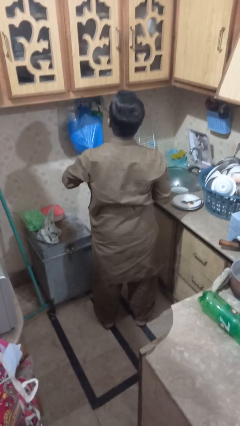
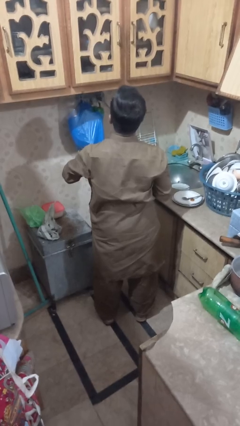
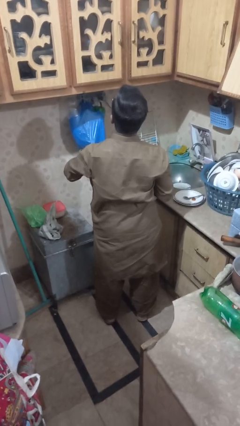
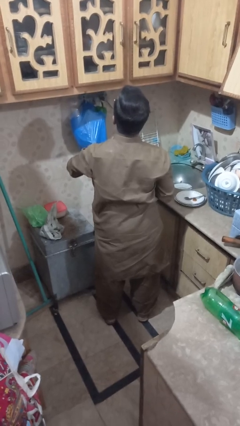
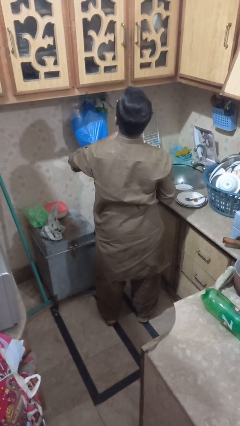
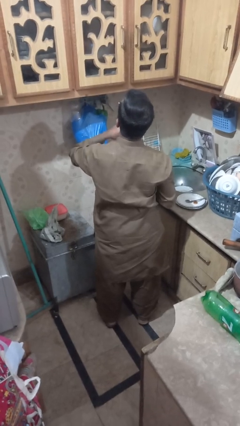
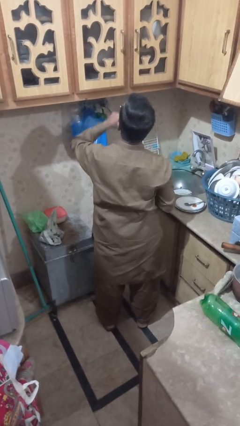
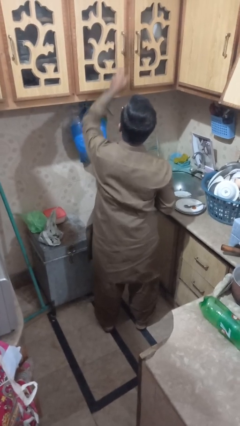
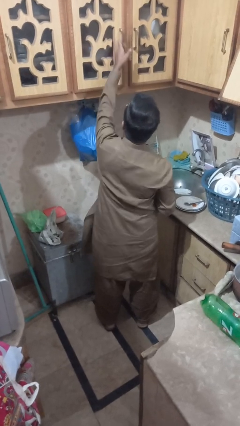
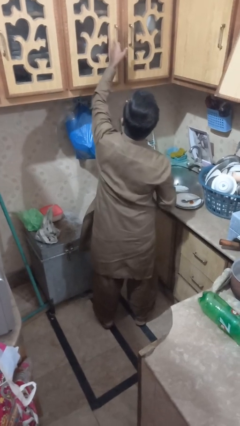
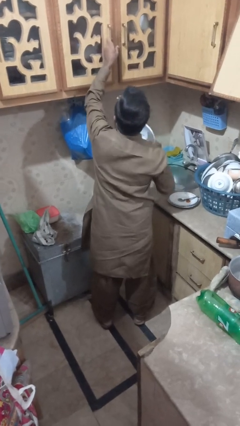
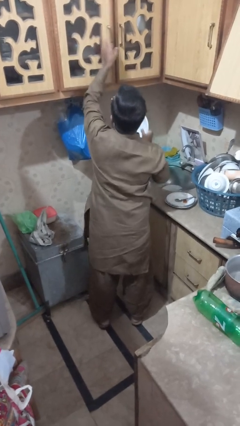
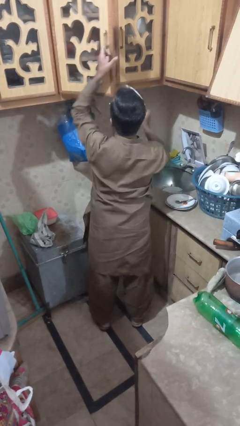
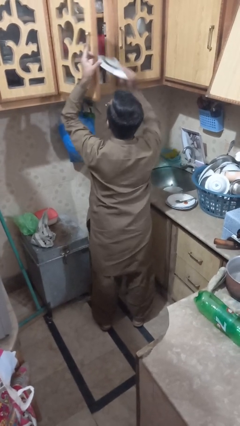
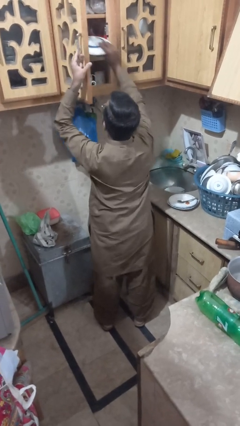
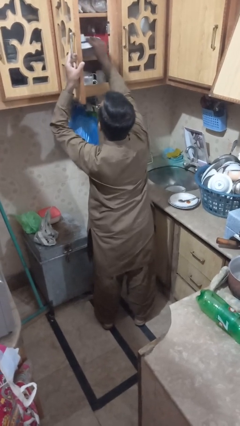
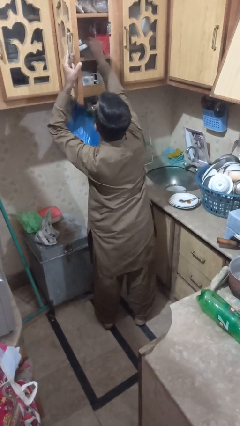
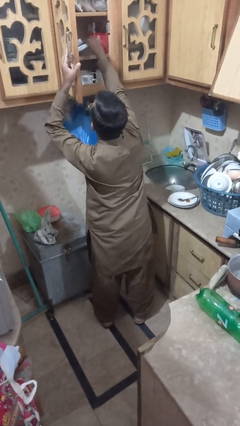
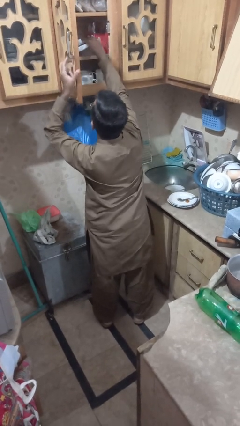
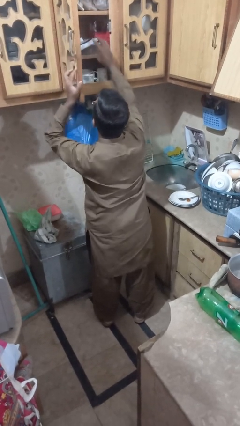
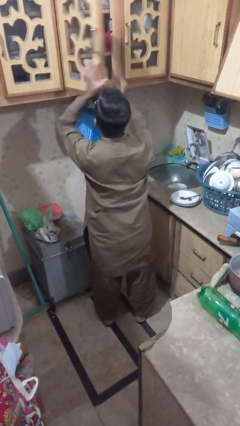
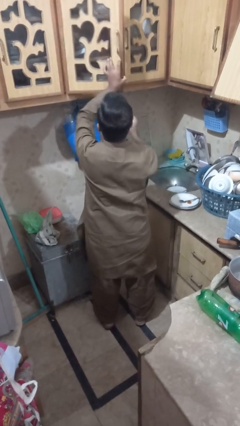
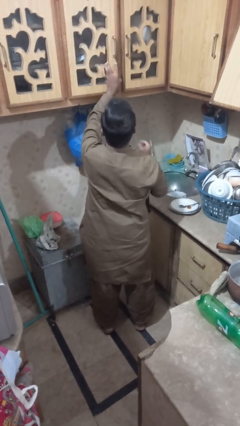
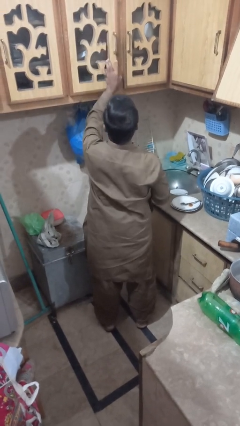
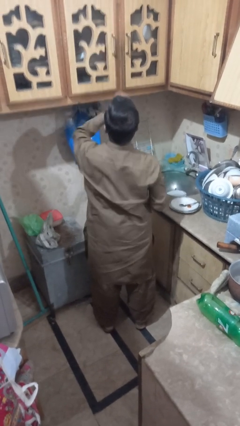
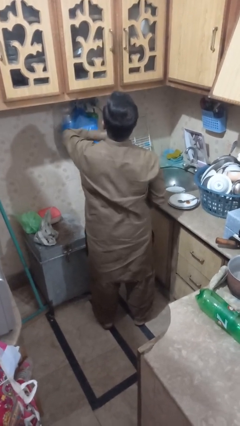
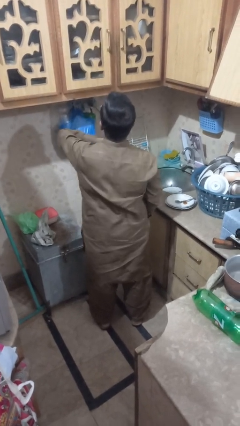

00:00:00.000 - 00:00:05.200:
person puts object in cabinet

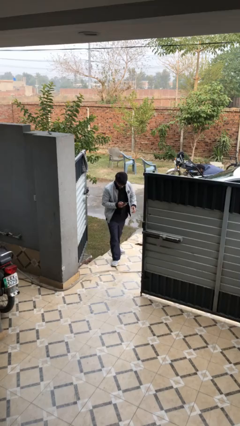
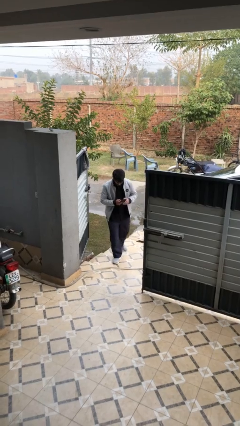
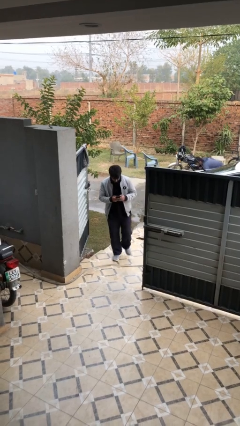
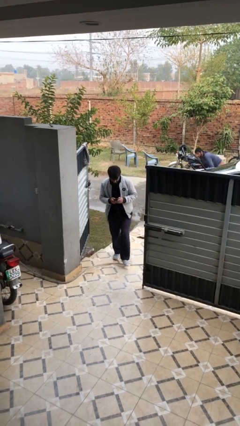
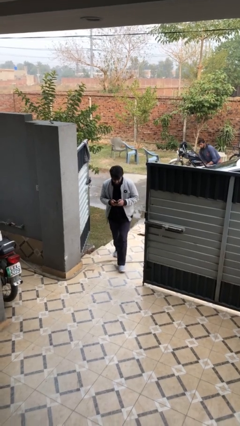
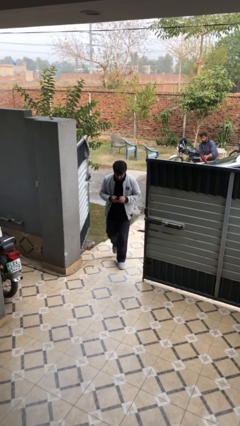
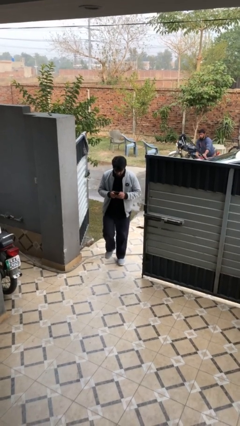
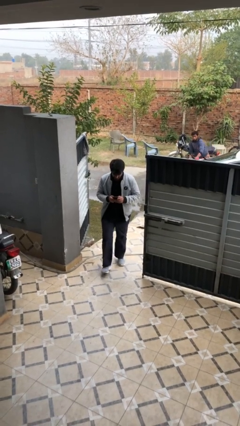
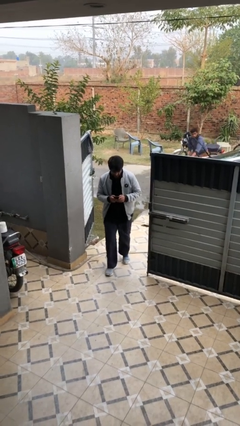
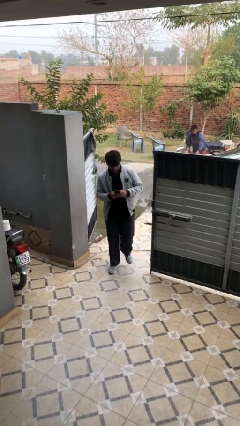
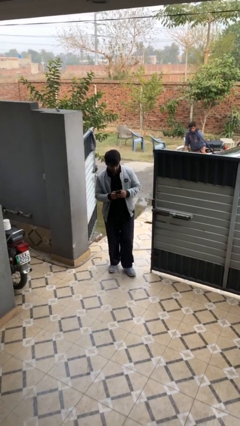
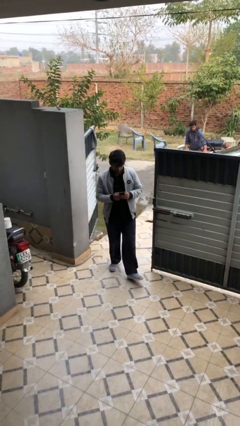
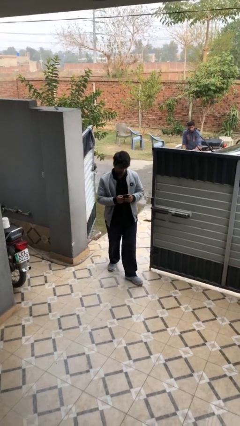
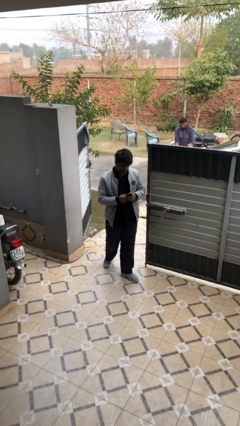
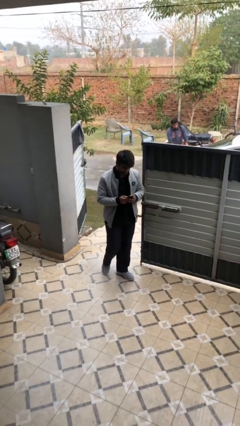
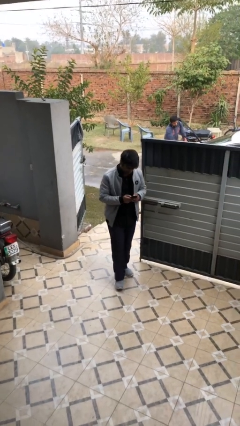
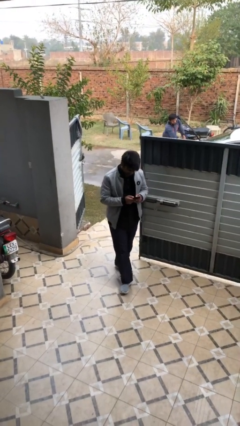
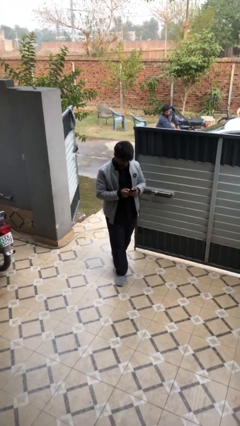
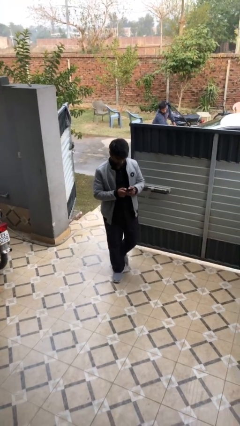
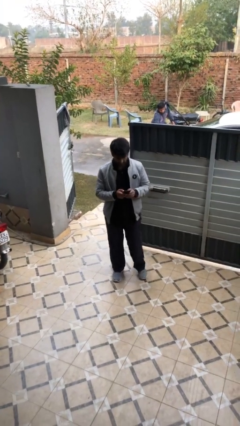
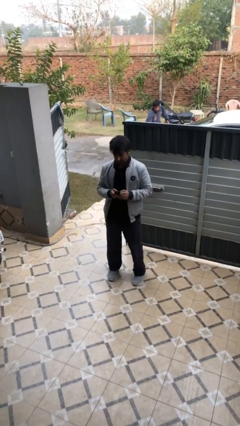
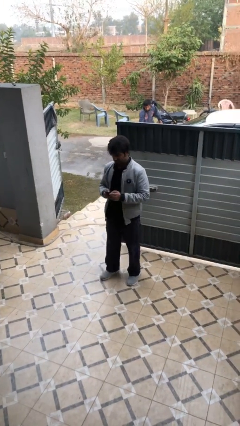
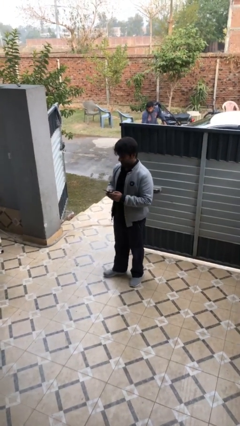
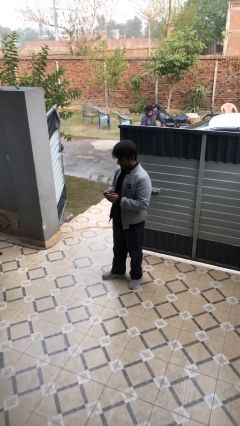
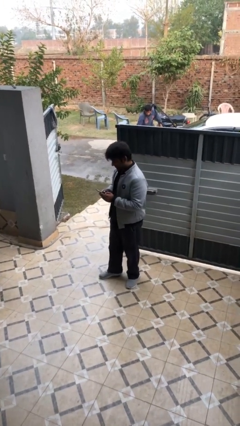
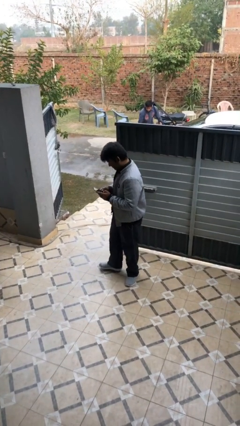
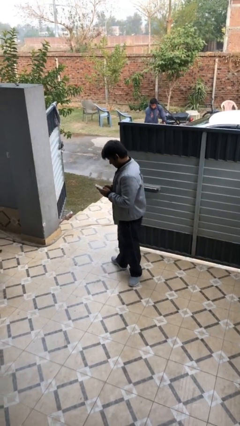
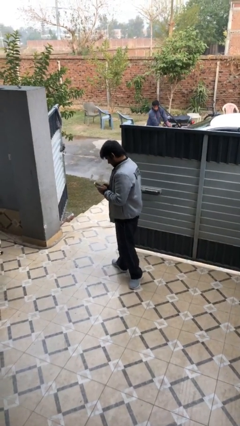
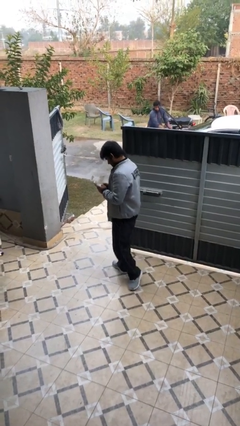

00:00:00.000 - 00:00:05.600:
person enters scene through structure

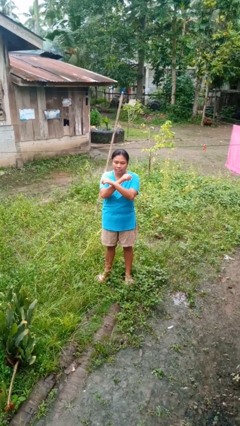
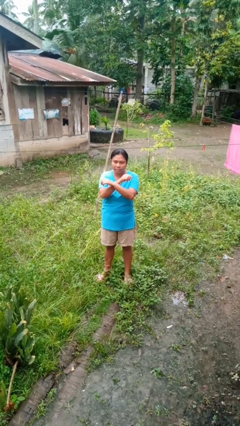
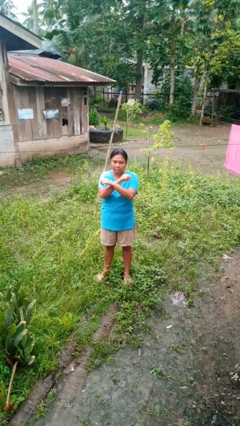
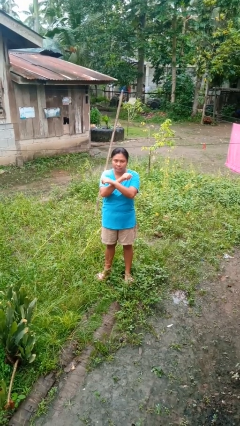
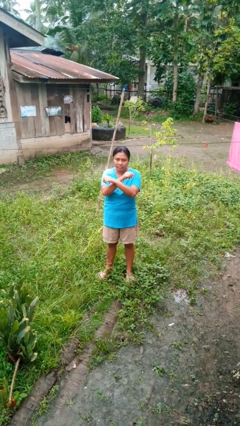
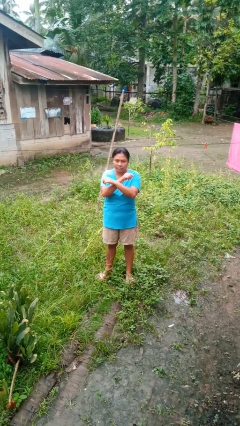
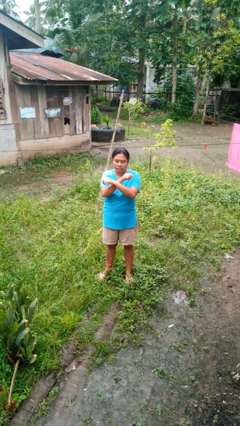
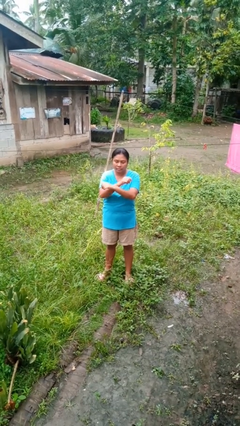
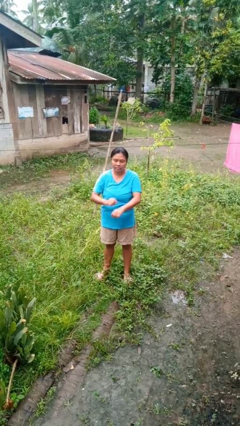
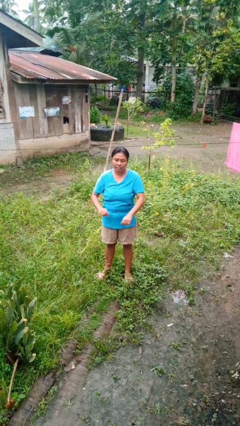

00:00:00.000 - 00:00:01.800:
person gestures arms x

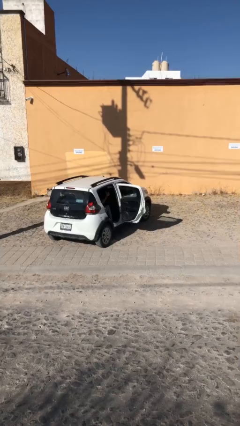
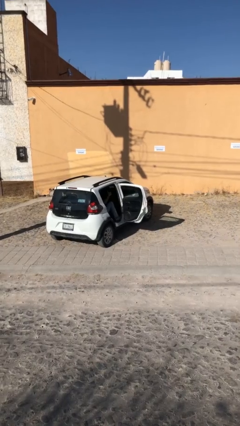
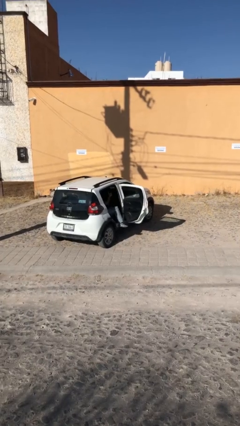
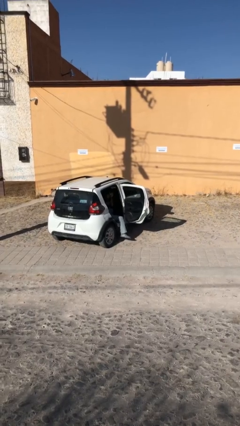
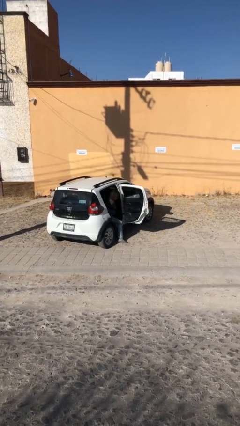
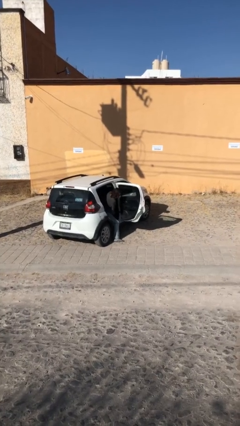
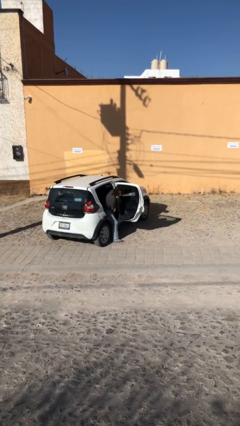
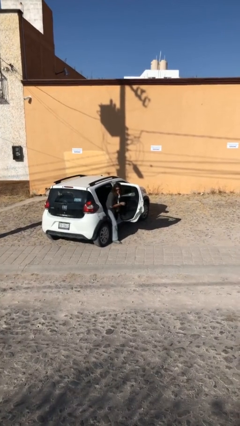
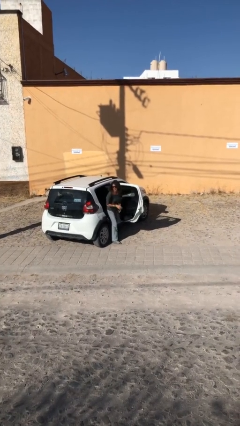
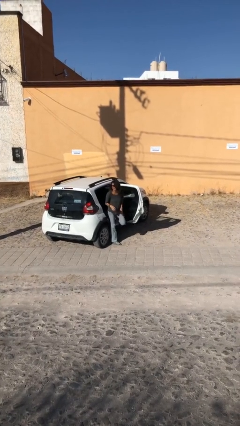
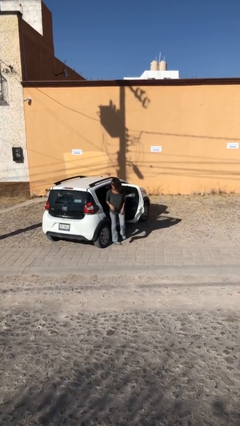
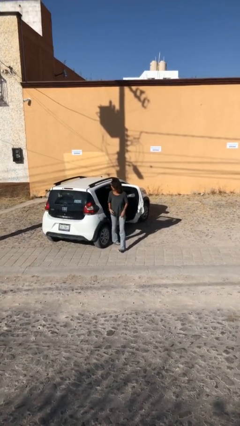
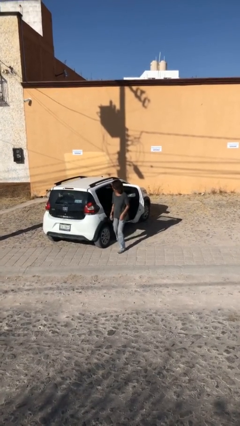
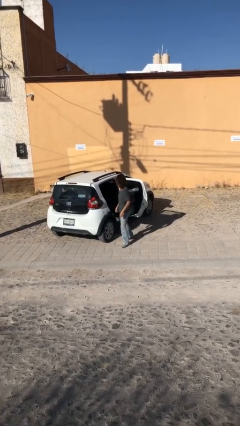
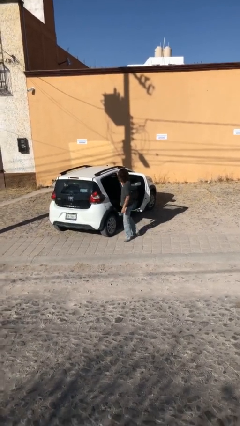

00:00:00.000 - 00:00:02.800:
person exits car

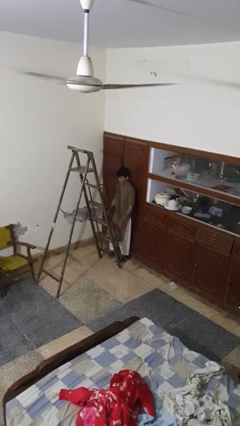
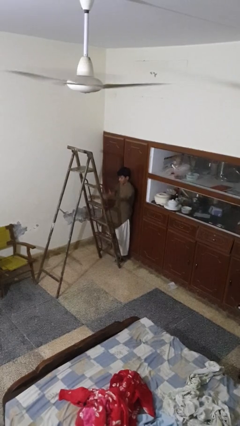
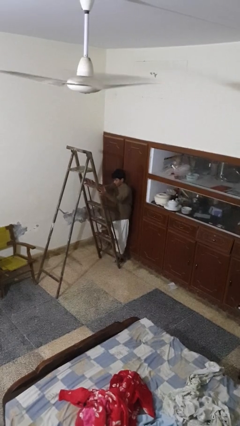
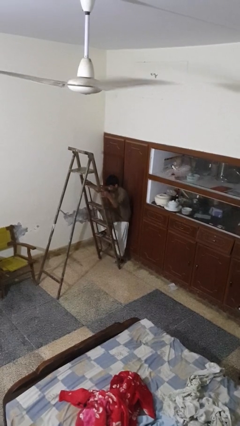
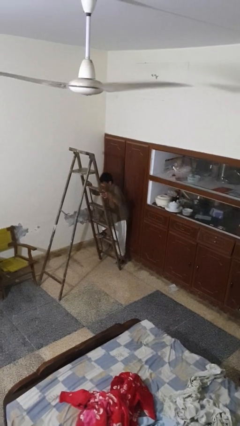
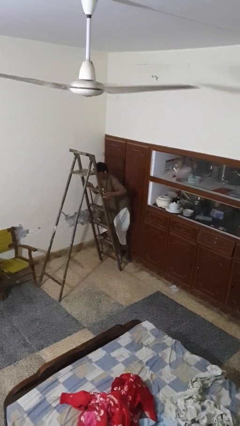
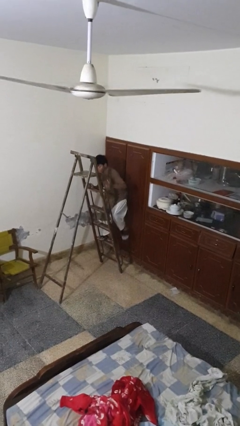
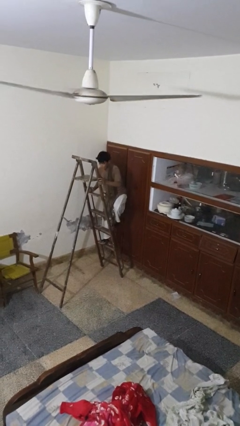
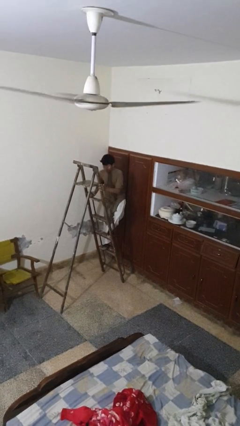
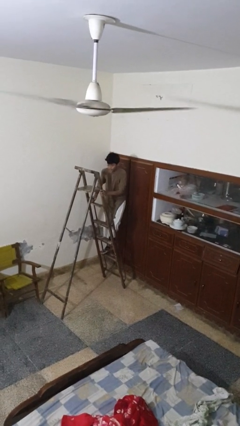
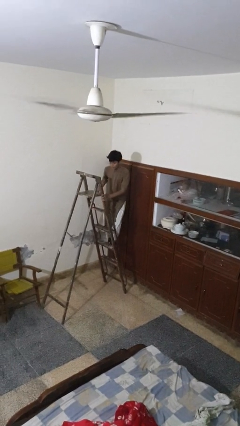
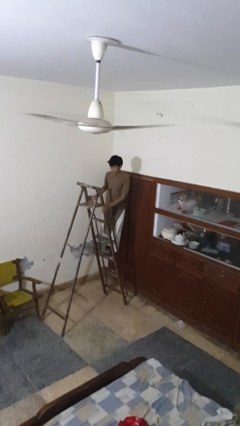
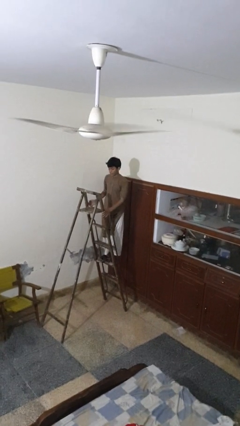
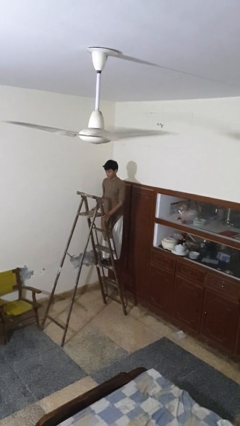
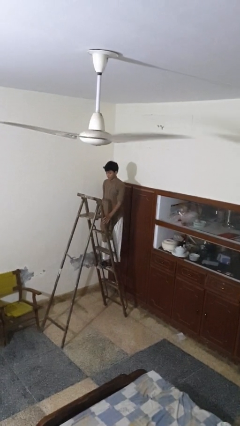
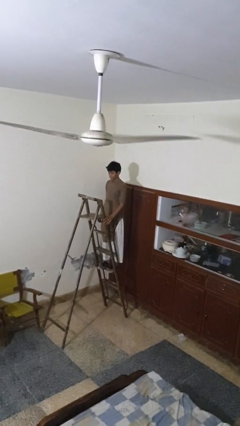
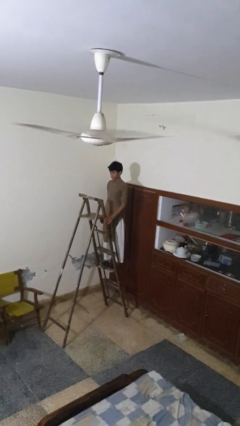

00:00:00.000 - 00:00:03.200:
person climbs up ladder
